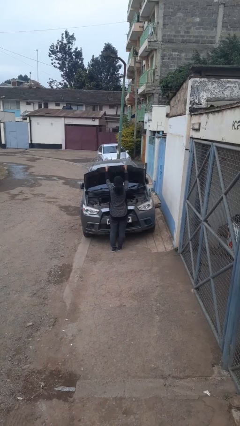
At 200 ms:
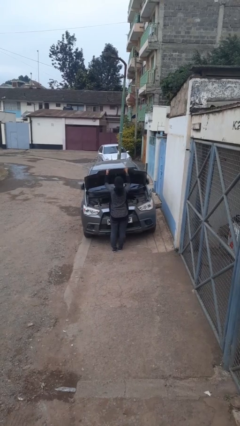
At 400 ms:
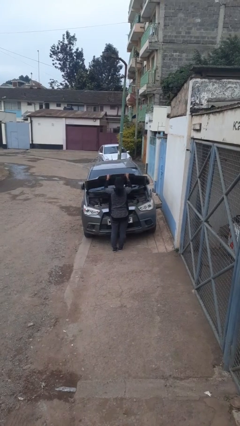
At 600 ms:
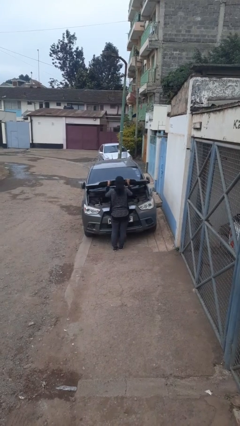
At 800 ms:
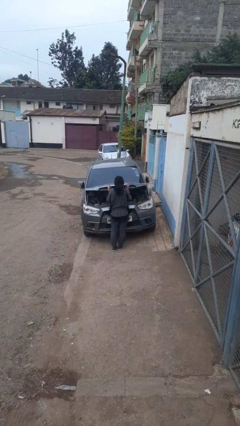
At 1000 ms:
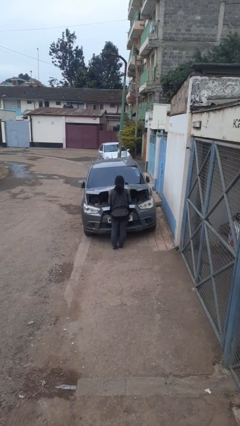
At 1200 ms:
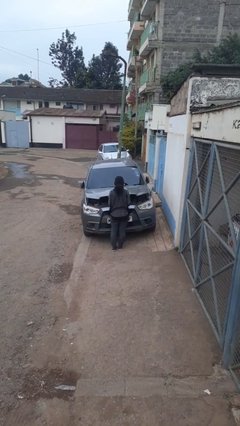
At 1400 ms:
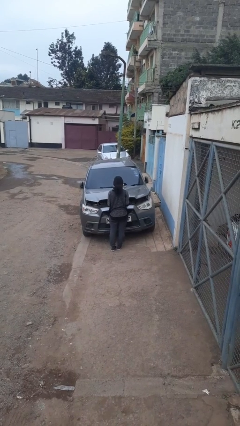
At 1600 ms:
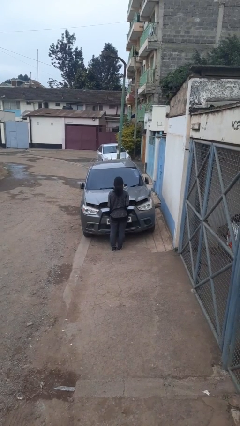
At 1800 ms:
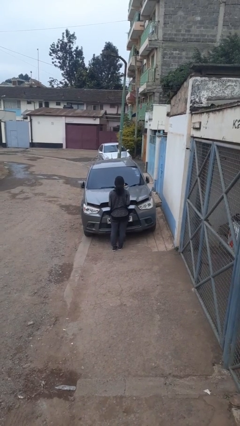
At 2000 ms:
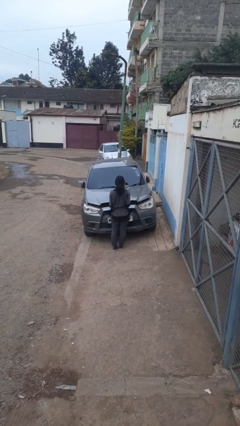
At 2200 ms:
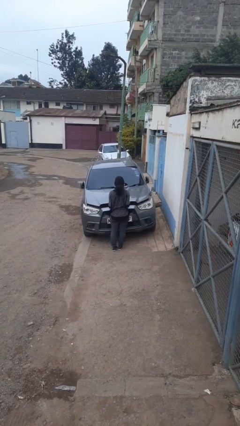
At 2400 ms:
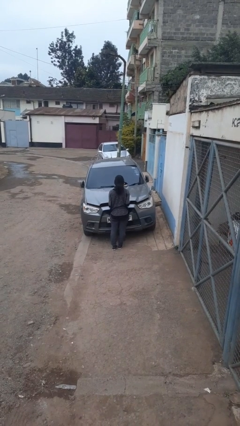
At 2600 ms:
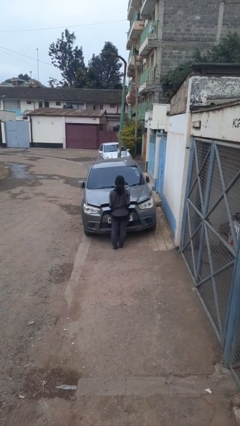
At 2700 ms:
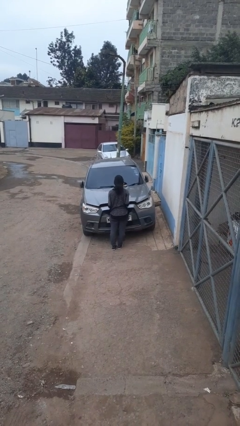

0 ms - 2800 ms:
person closes car hood

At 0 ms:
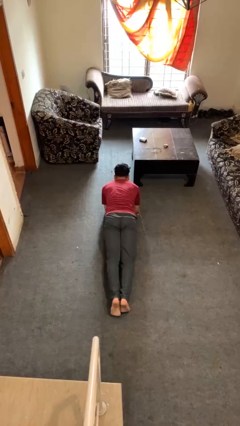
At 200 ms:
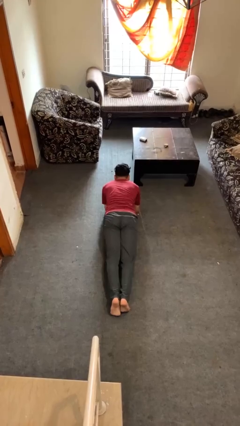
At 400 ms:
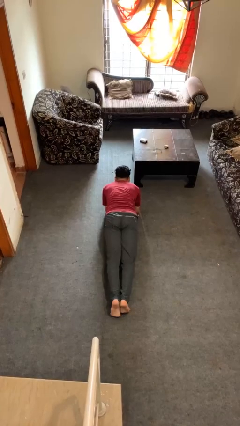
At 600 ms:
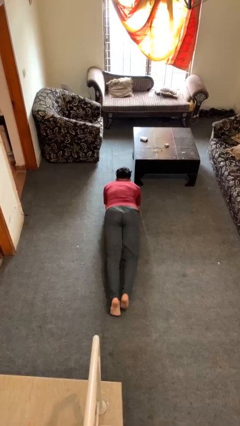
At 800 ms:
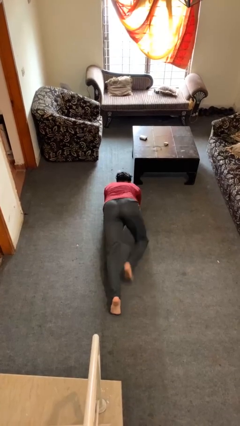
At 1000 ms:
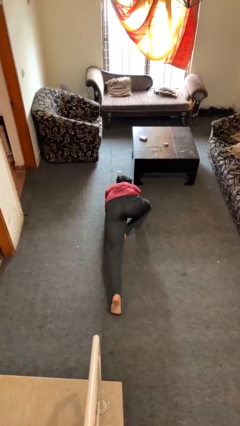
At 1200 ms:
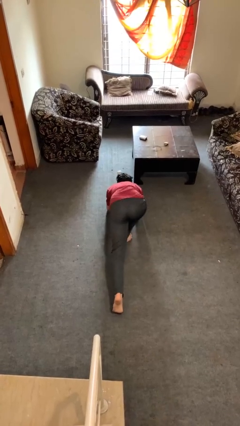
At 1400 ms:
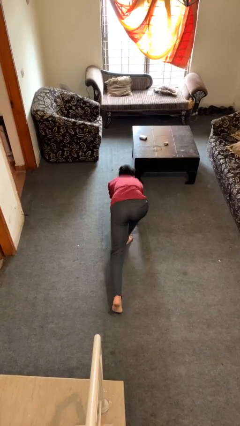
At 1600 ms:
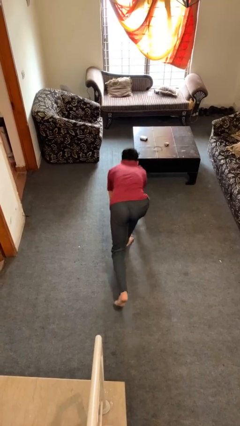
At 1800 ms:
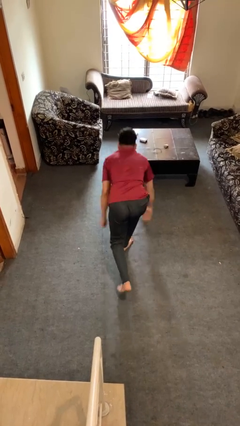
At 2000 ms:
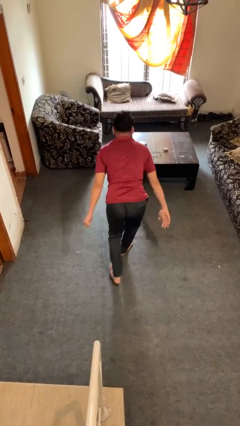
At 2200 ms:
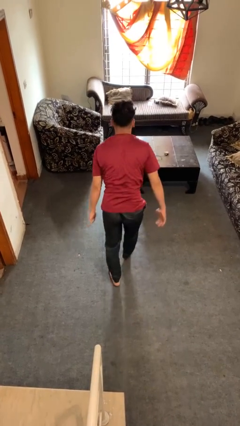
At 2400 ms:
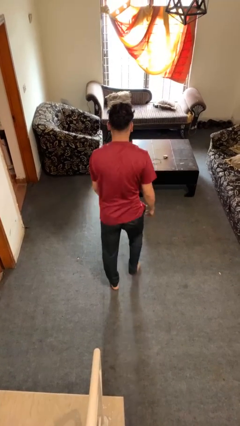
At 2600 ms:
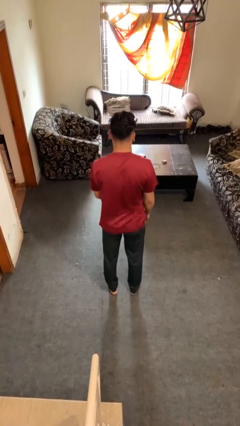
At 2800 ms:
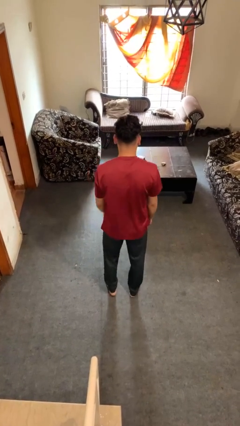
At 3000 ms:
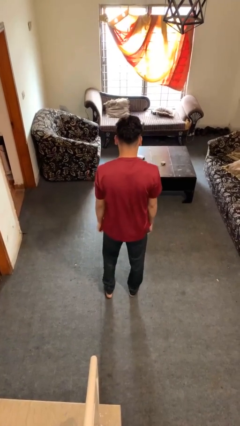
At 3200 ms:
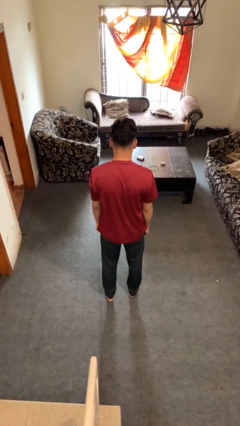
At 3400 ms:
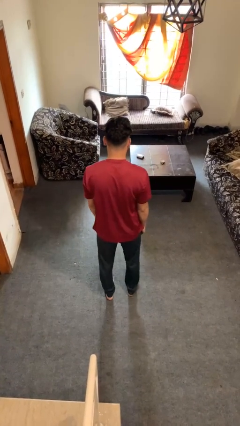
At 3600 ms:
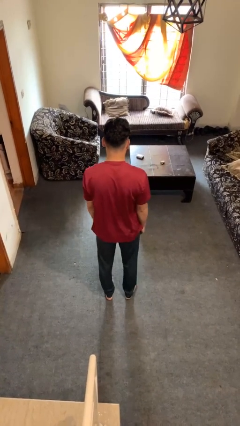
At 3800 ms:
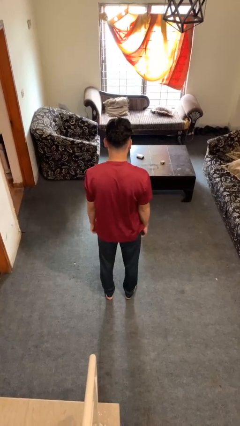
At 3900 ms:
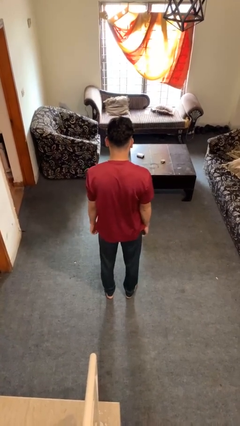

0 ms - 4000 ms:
person stands up from floor

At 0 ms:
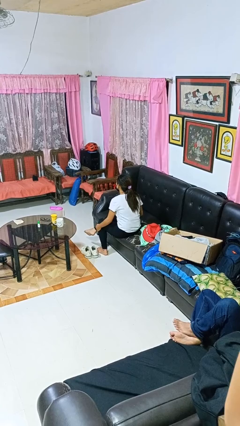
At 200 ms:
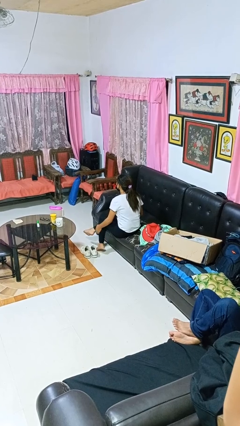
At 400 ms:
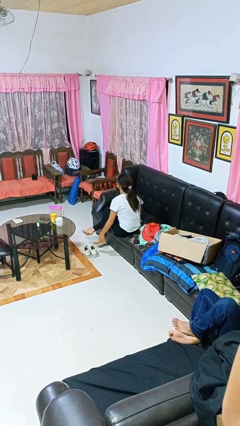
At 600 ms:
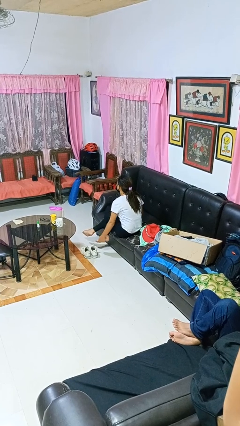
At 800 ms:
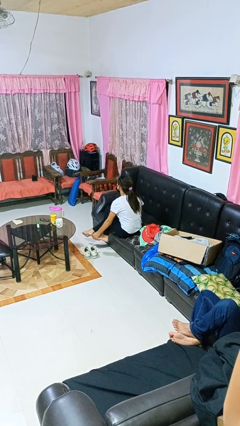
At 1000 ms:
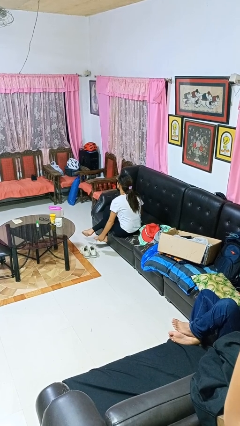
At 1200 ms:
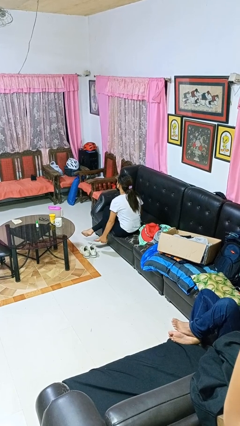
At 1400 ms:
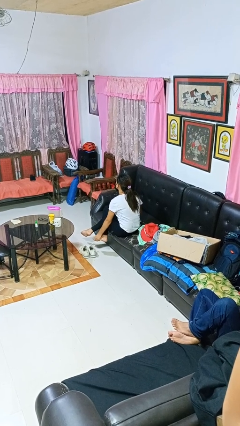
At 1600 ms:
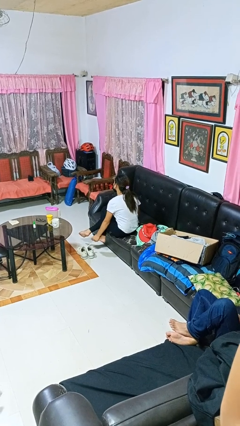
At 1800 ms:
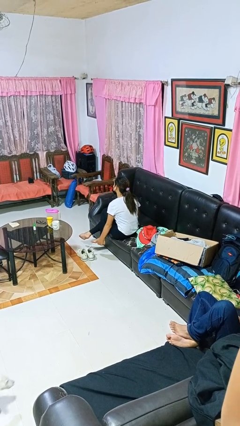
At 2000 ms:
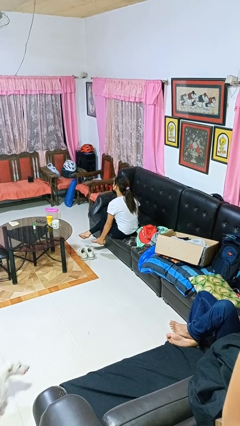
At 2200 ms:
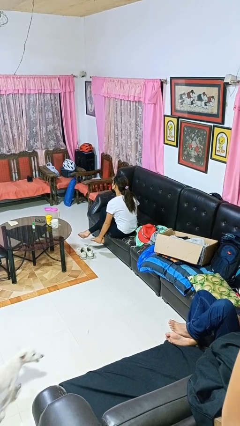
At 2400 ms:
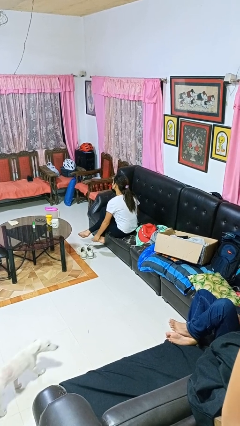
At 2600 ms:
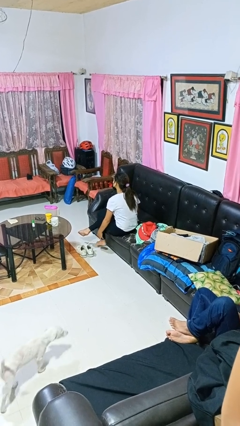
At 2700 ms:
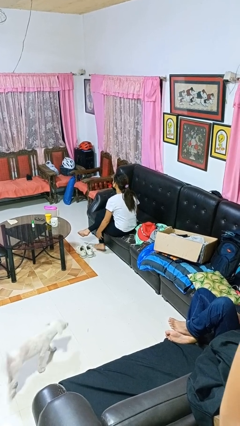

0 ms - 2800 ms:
person rubs foot

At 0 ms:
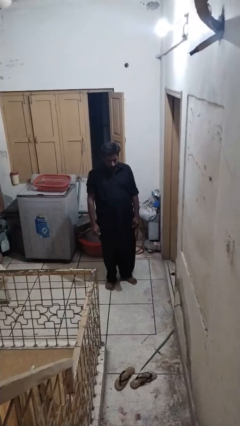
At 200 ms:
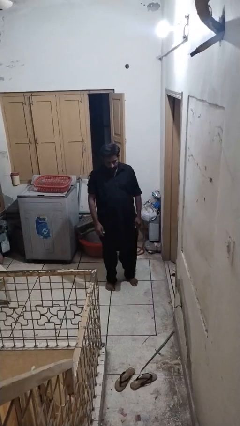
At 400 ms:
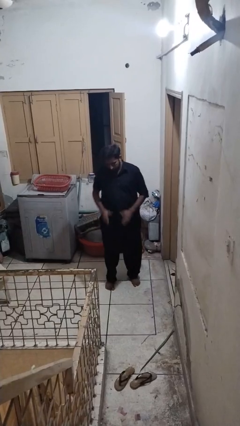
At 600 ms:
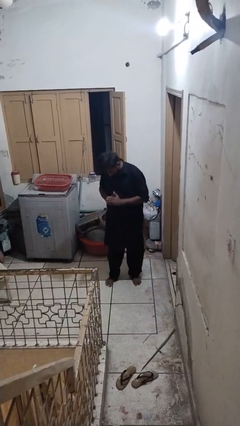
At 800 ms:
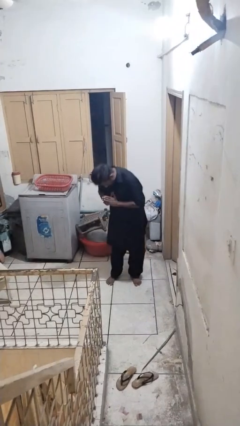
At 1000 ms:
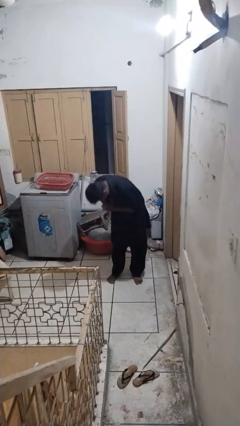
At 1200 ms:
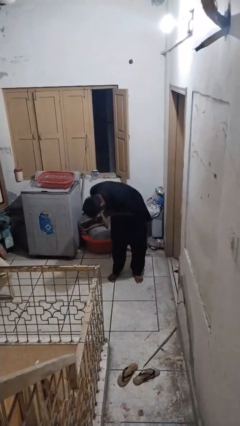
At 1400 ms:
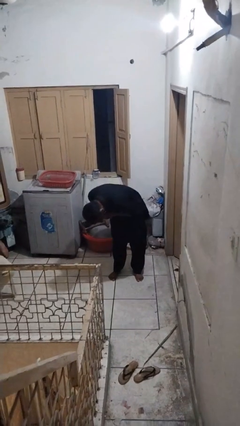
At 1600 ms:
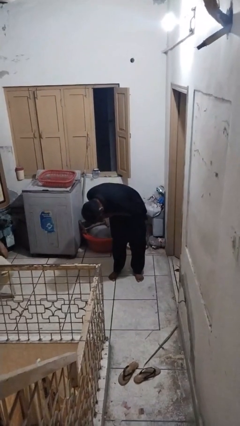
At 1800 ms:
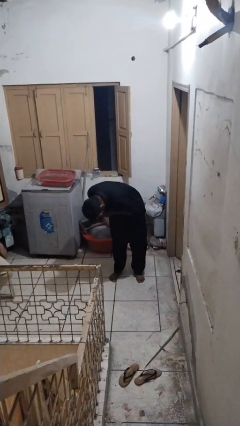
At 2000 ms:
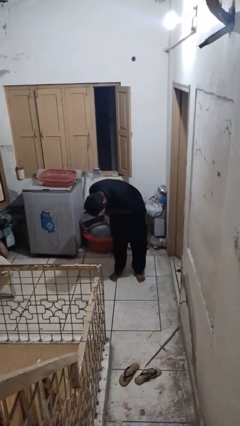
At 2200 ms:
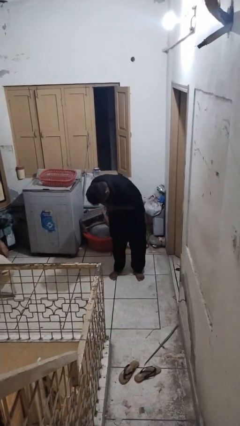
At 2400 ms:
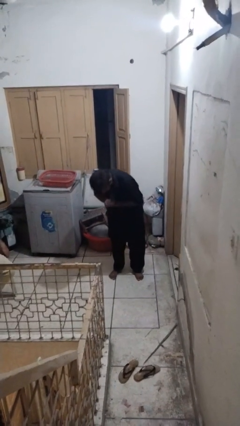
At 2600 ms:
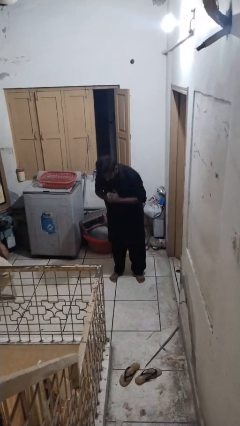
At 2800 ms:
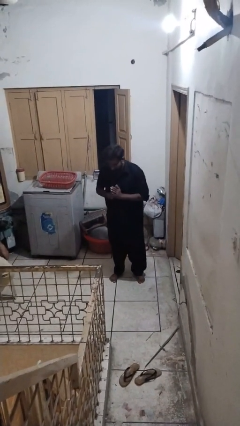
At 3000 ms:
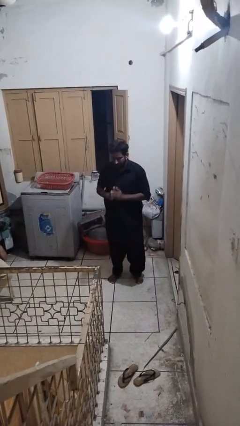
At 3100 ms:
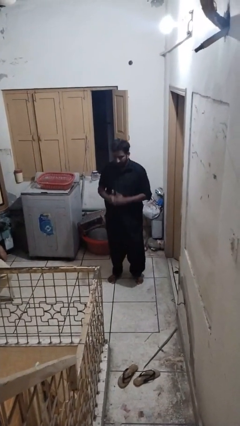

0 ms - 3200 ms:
person bows

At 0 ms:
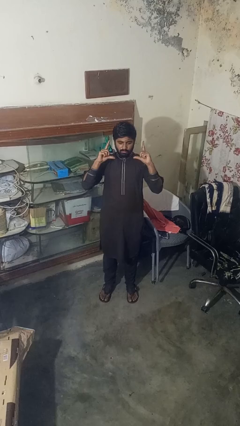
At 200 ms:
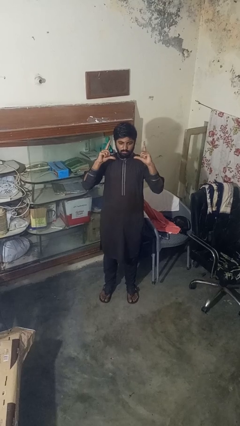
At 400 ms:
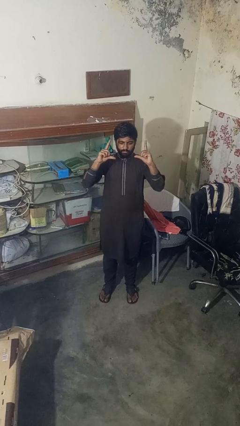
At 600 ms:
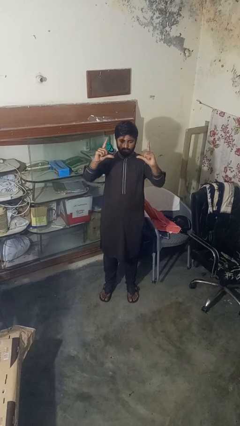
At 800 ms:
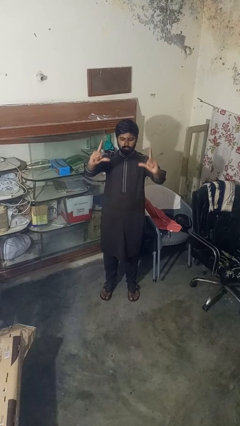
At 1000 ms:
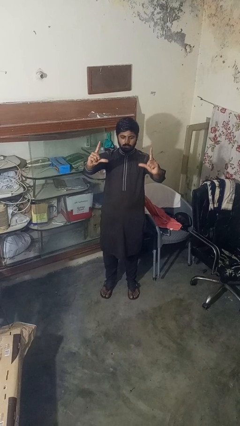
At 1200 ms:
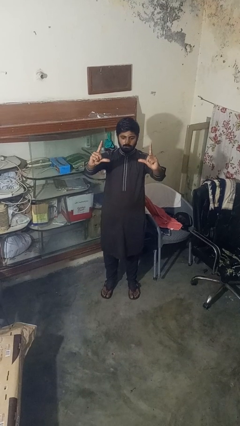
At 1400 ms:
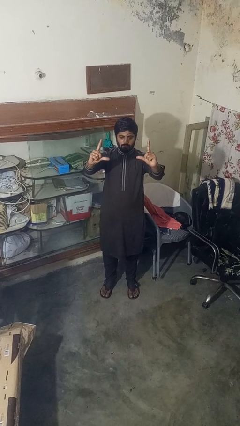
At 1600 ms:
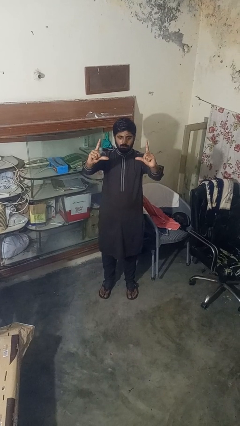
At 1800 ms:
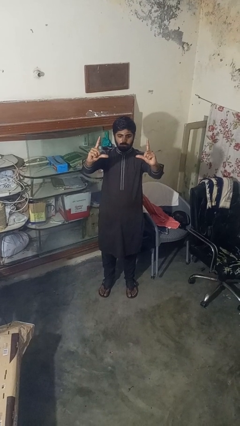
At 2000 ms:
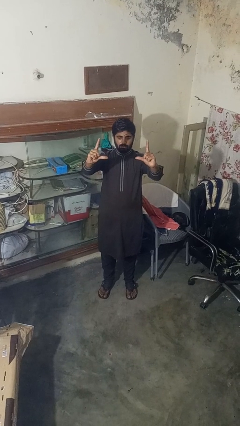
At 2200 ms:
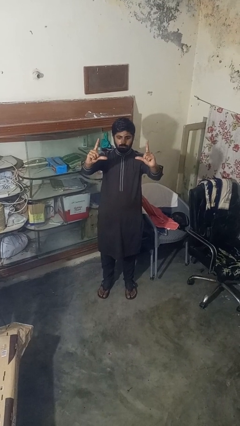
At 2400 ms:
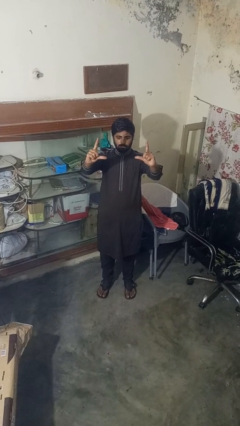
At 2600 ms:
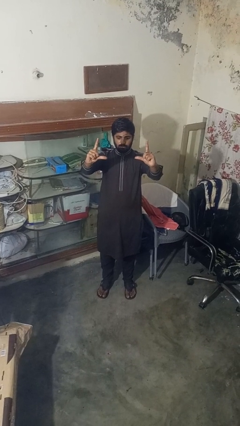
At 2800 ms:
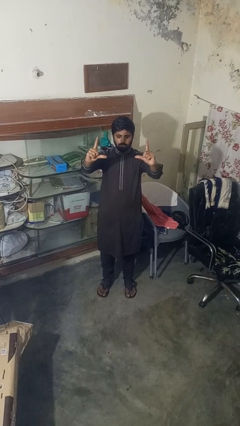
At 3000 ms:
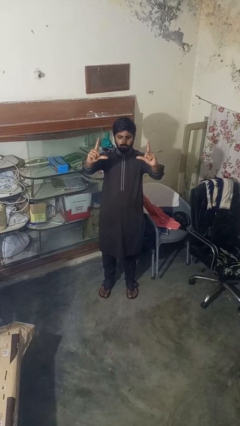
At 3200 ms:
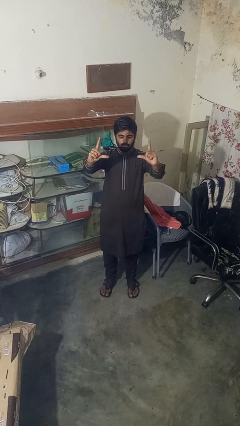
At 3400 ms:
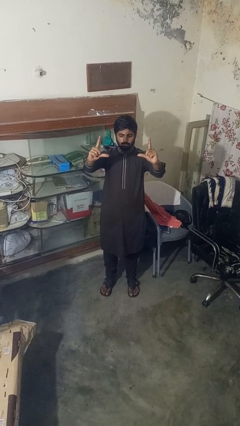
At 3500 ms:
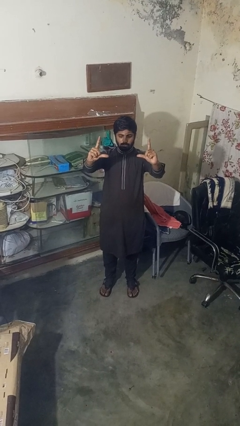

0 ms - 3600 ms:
person gestures zoom out

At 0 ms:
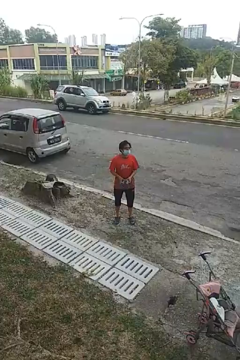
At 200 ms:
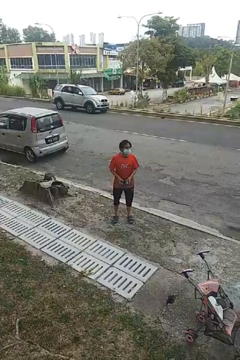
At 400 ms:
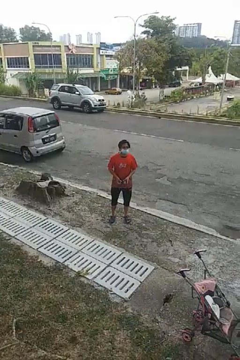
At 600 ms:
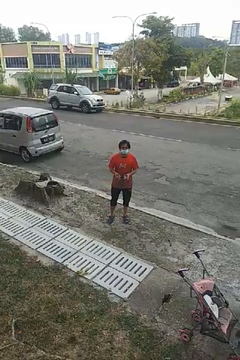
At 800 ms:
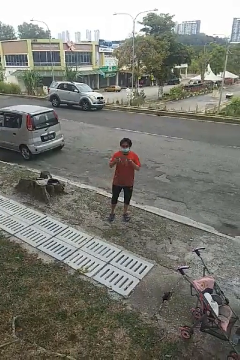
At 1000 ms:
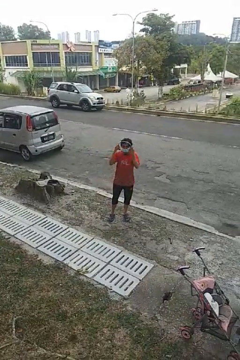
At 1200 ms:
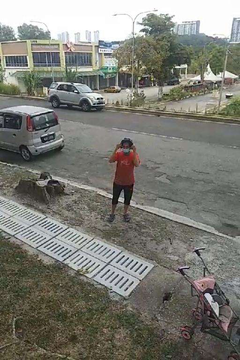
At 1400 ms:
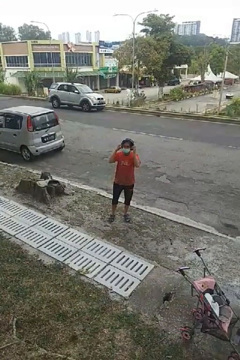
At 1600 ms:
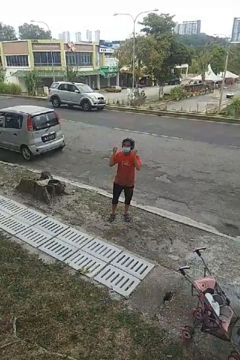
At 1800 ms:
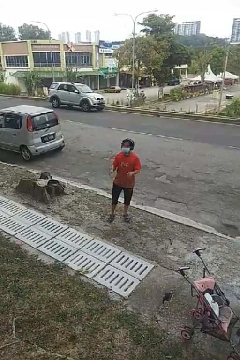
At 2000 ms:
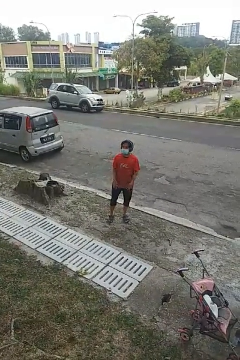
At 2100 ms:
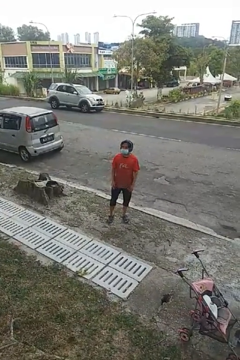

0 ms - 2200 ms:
person puts on headphones
